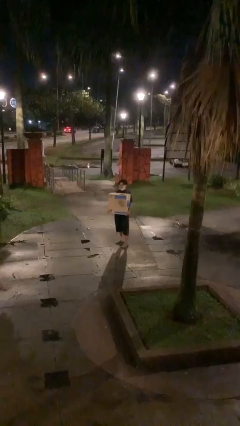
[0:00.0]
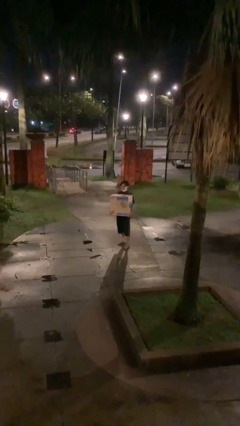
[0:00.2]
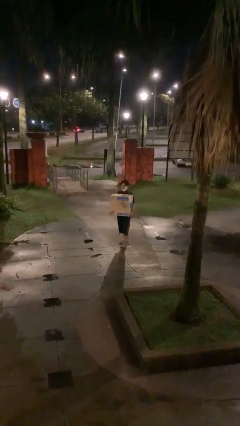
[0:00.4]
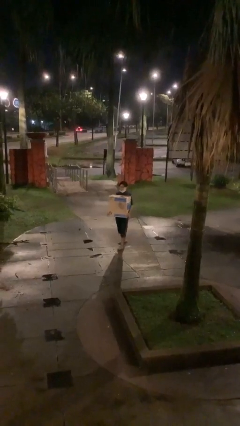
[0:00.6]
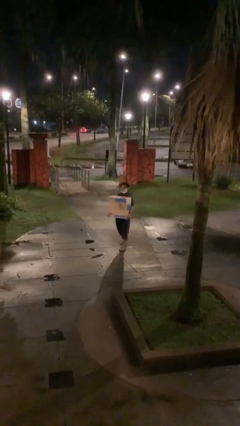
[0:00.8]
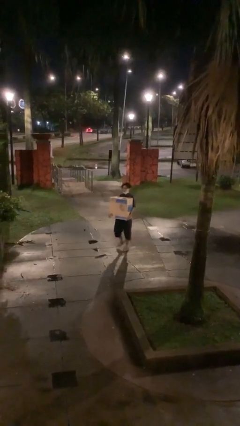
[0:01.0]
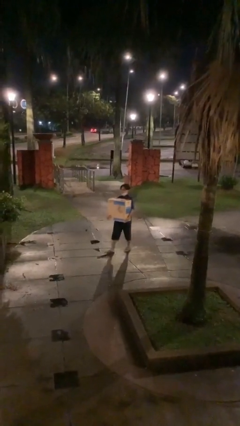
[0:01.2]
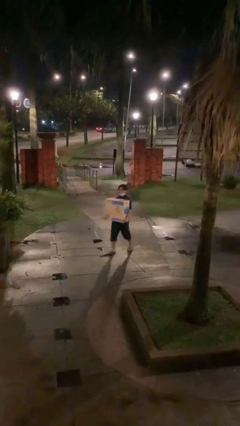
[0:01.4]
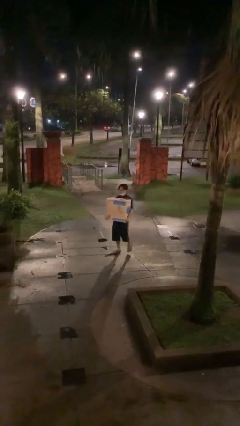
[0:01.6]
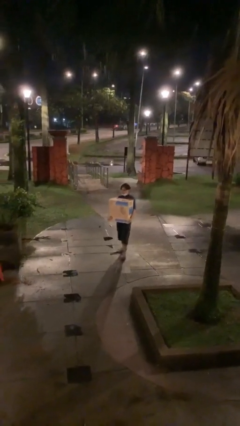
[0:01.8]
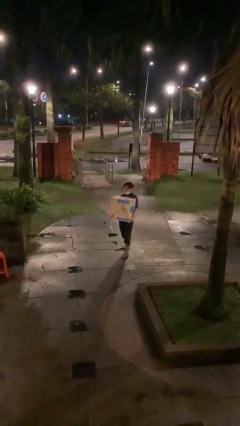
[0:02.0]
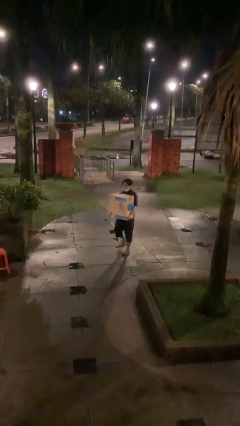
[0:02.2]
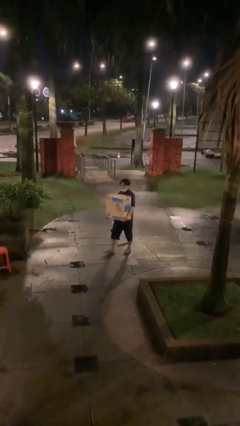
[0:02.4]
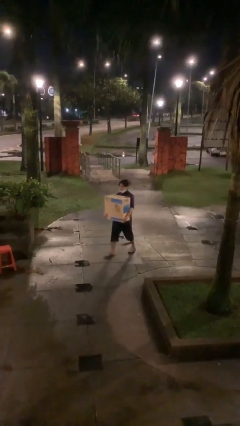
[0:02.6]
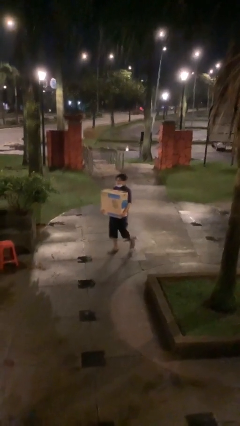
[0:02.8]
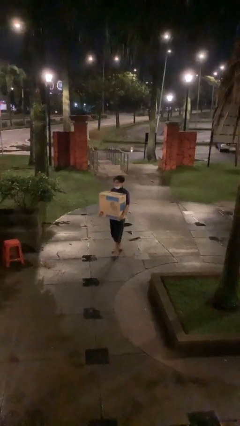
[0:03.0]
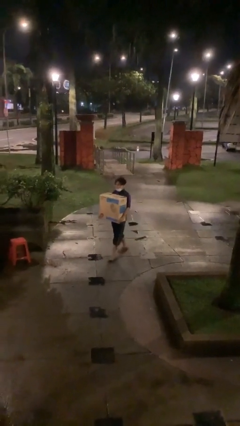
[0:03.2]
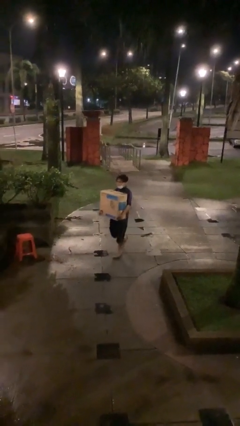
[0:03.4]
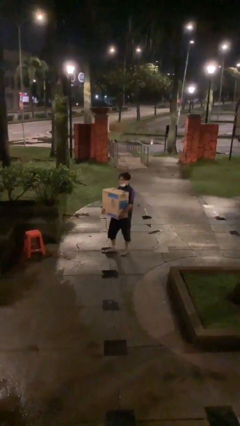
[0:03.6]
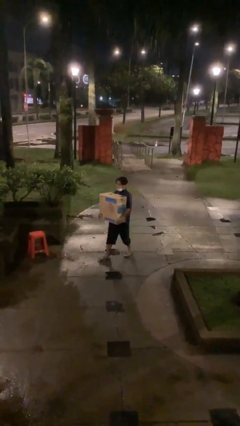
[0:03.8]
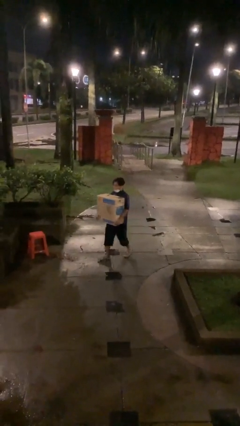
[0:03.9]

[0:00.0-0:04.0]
person carries heavy object

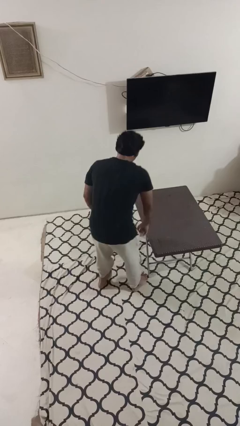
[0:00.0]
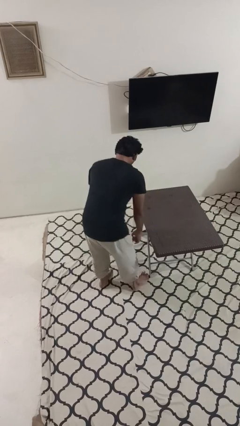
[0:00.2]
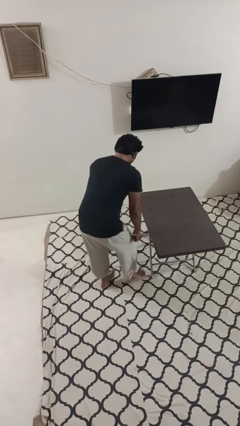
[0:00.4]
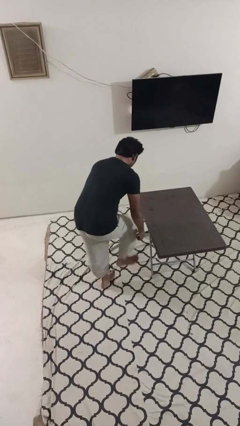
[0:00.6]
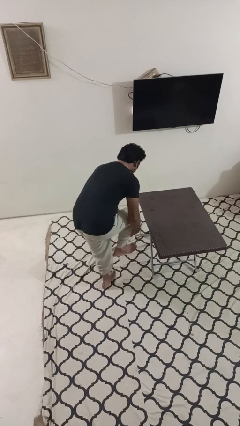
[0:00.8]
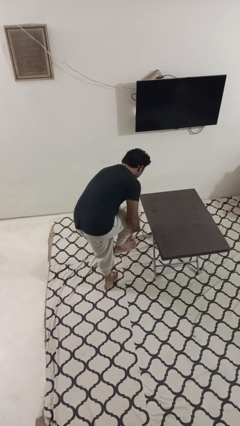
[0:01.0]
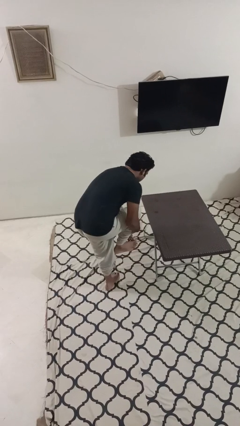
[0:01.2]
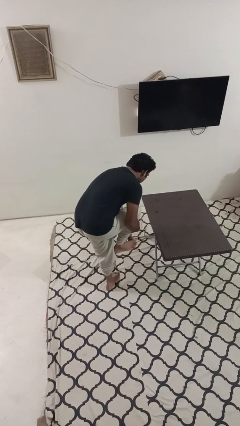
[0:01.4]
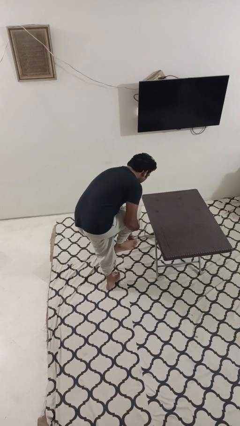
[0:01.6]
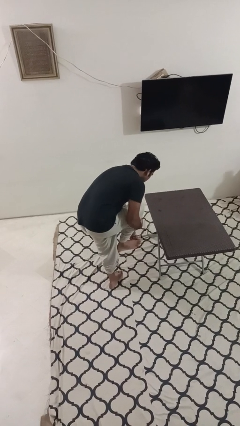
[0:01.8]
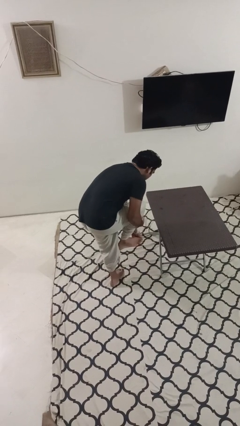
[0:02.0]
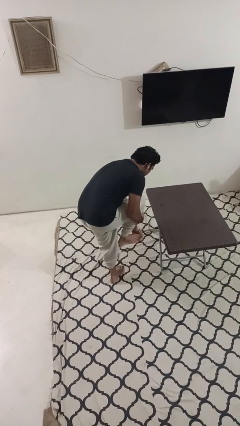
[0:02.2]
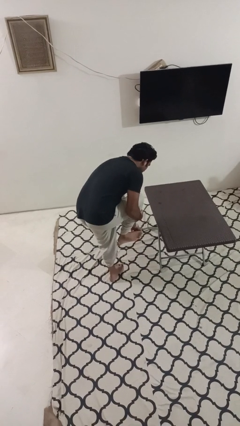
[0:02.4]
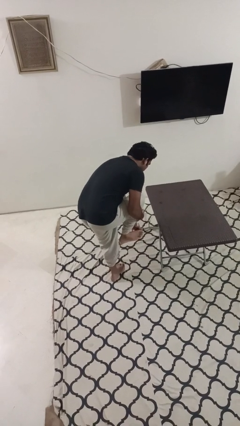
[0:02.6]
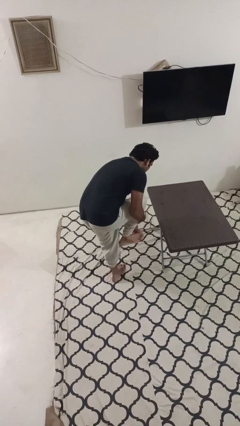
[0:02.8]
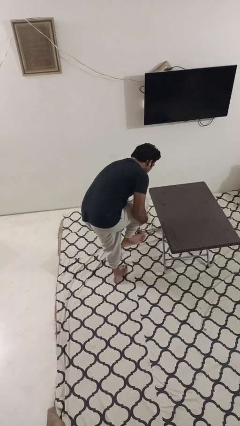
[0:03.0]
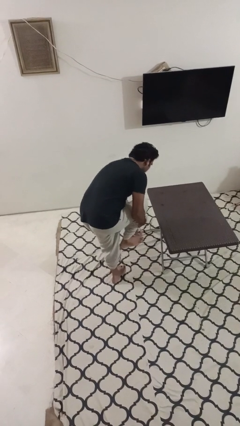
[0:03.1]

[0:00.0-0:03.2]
person stubs toe

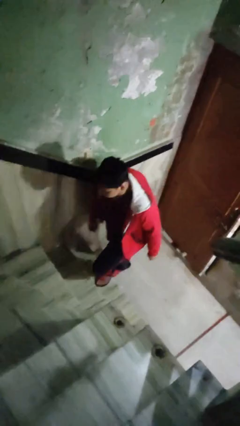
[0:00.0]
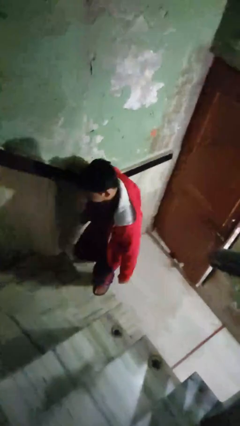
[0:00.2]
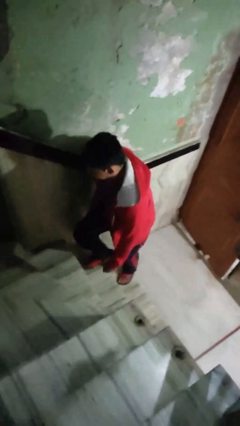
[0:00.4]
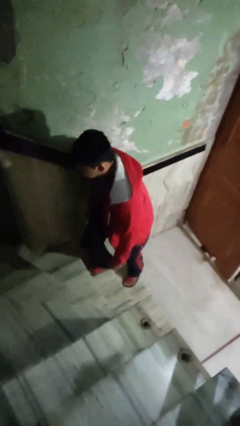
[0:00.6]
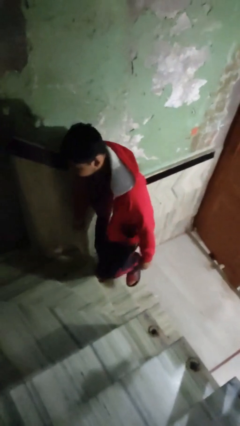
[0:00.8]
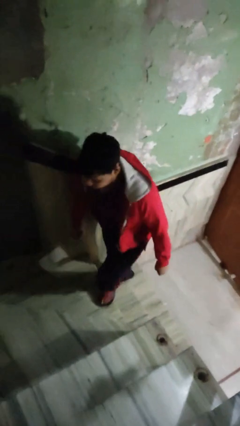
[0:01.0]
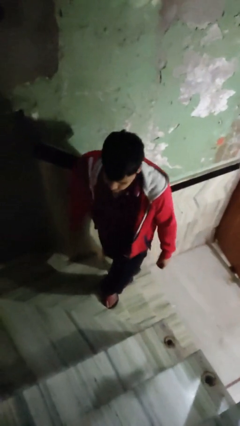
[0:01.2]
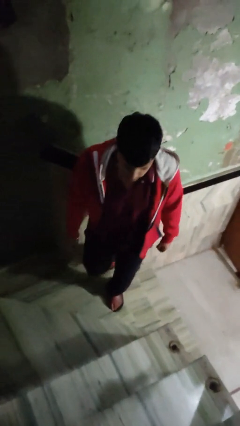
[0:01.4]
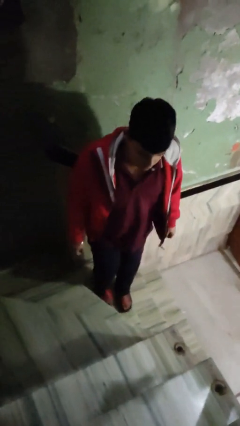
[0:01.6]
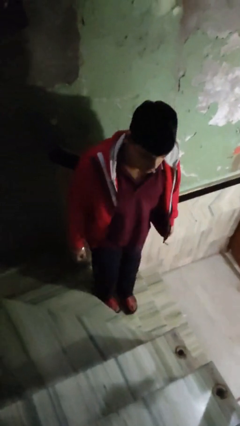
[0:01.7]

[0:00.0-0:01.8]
person climbs up stairs

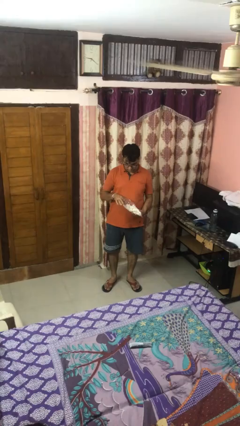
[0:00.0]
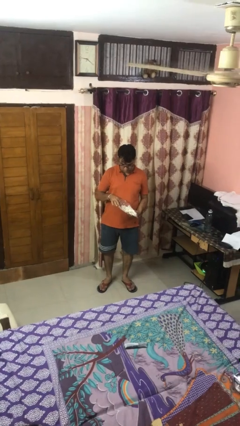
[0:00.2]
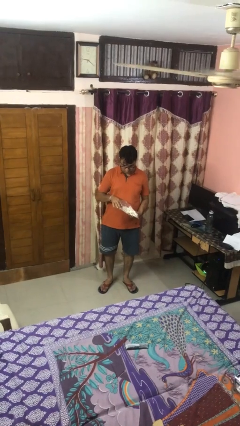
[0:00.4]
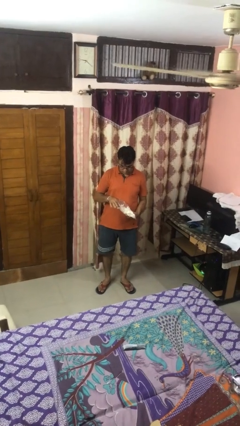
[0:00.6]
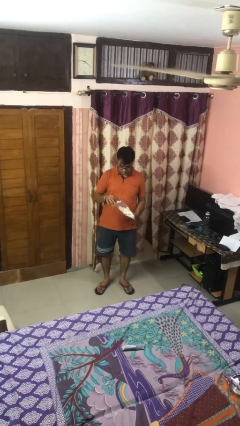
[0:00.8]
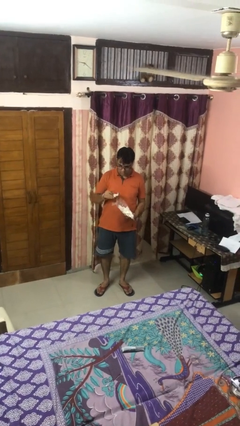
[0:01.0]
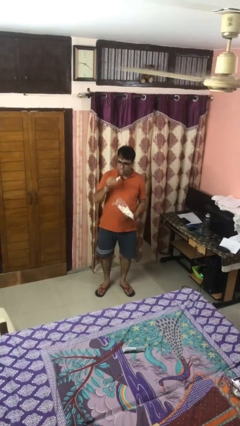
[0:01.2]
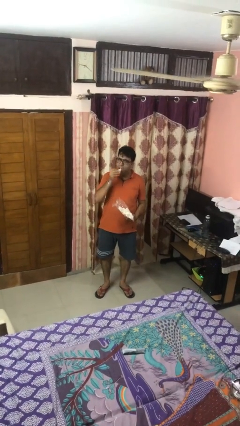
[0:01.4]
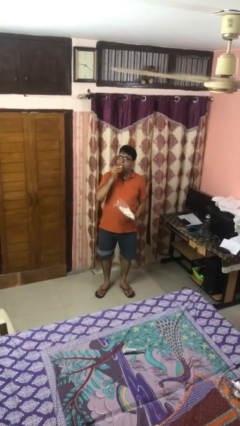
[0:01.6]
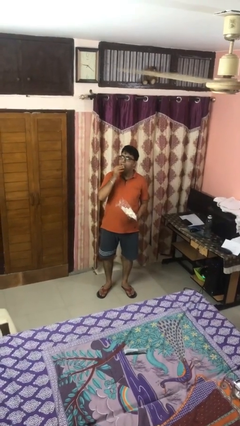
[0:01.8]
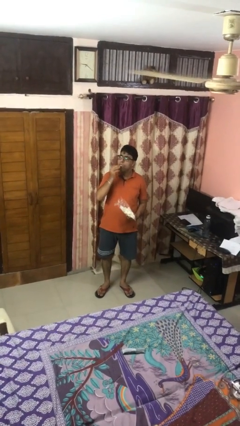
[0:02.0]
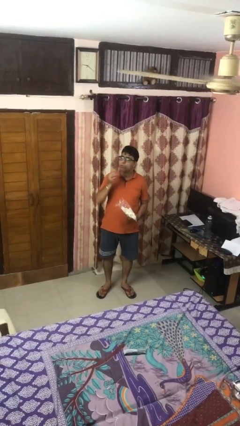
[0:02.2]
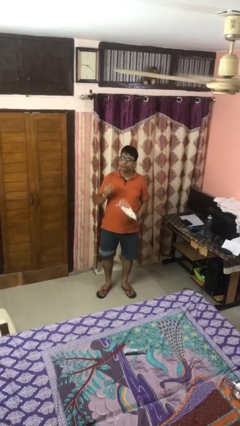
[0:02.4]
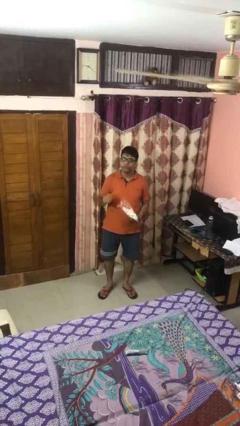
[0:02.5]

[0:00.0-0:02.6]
person eats snack from bag

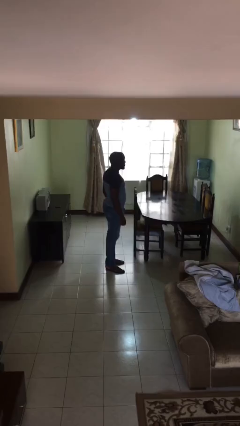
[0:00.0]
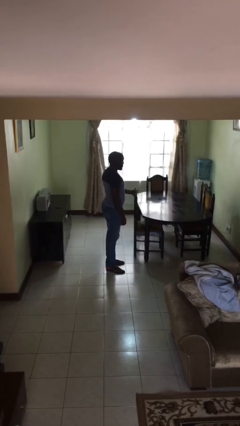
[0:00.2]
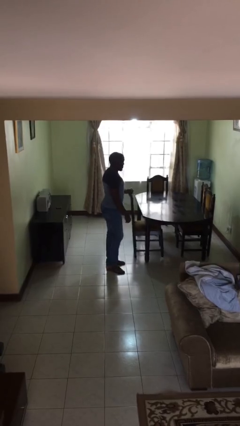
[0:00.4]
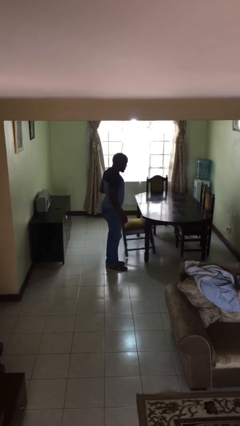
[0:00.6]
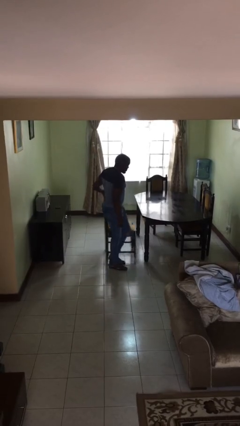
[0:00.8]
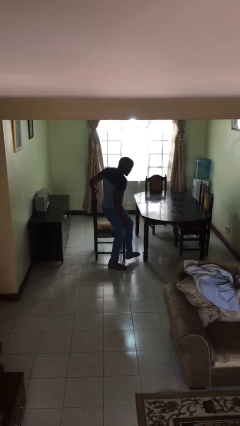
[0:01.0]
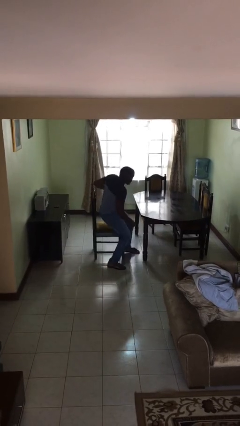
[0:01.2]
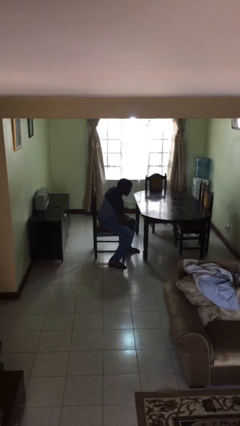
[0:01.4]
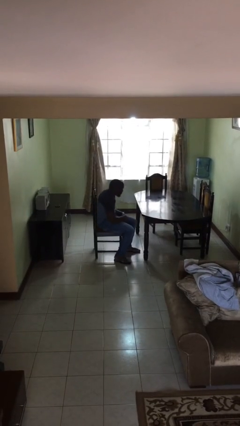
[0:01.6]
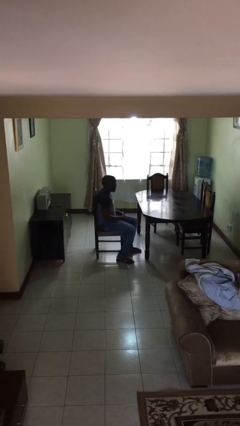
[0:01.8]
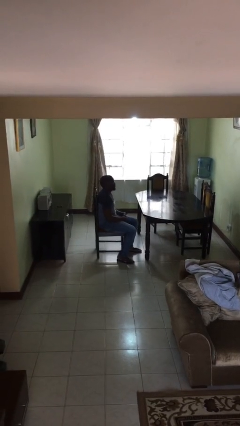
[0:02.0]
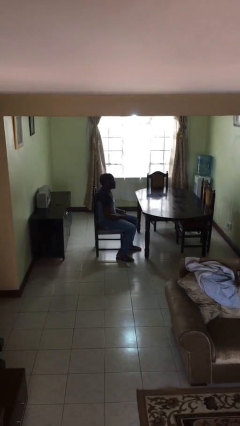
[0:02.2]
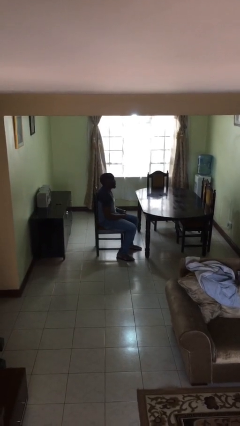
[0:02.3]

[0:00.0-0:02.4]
person sits down

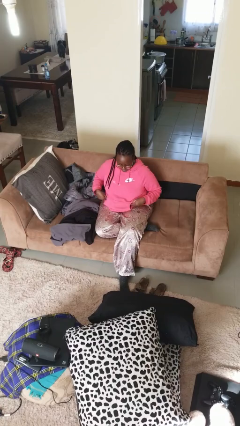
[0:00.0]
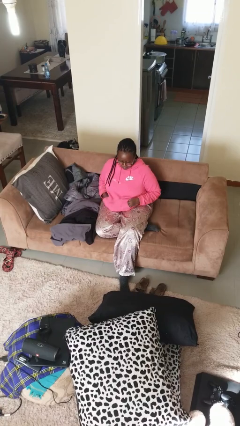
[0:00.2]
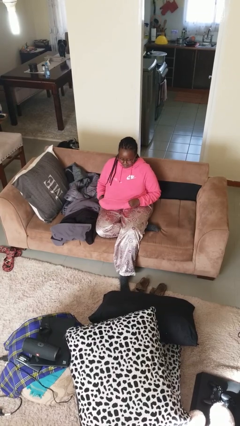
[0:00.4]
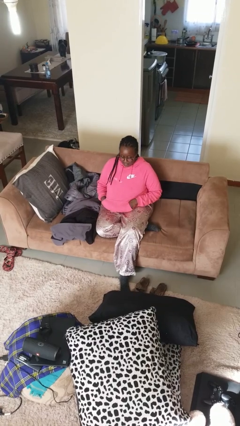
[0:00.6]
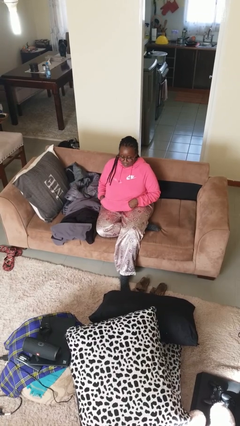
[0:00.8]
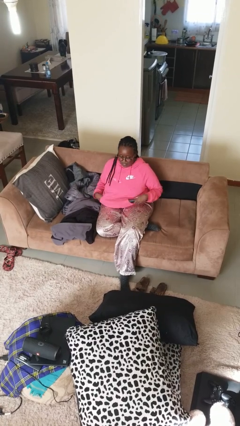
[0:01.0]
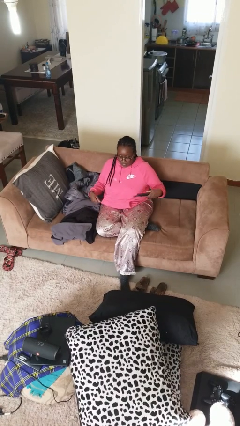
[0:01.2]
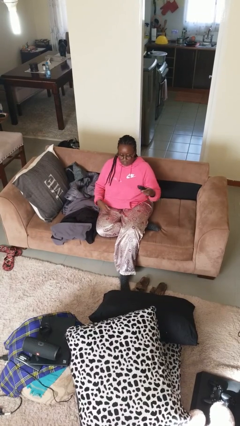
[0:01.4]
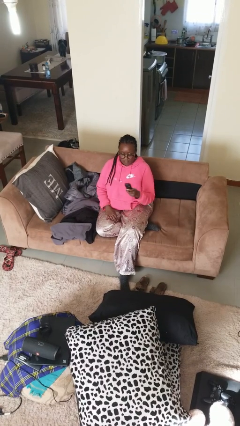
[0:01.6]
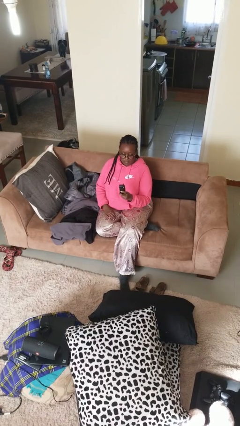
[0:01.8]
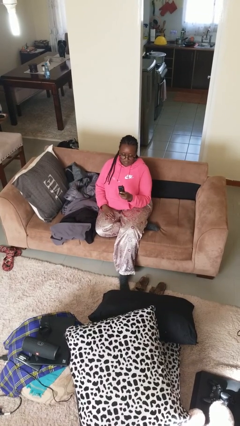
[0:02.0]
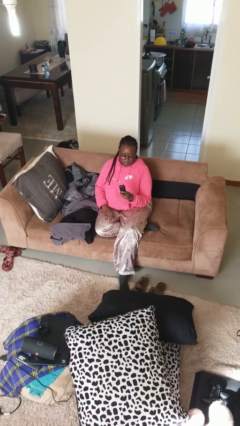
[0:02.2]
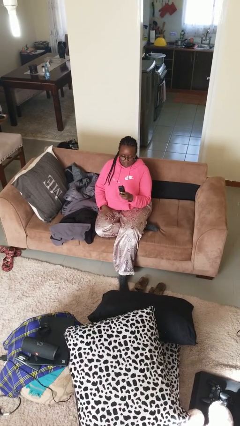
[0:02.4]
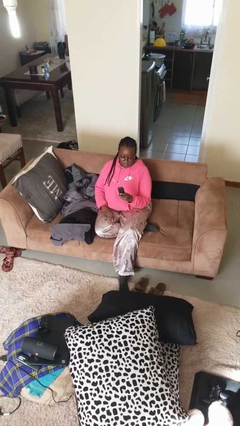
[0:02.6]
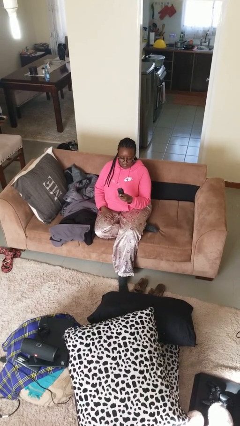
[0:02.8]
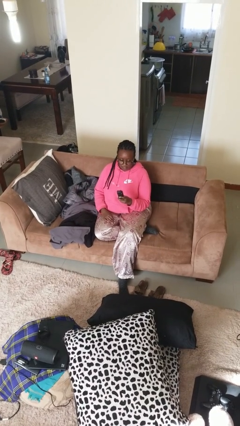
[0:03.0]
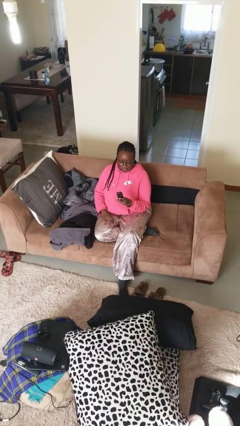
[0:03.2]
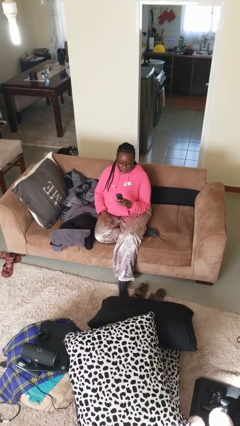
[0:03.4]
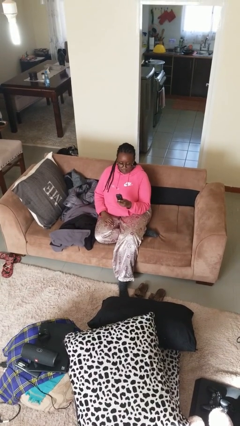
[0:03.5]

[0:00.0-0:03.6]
person takes phone from pocket
